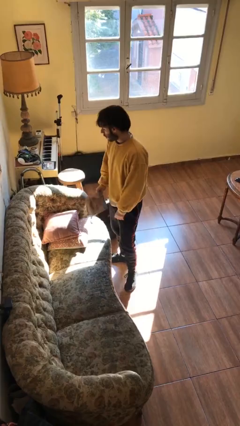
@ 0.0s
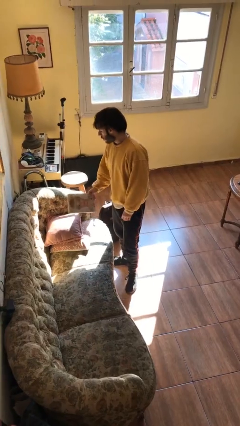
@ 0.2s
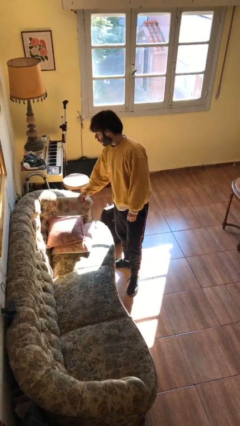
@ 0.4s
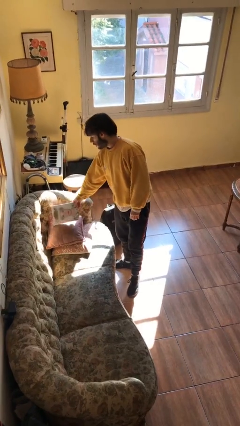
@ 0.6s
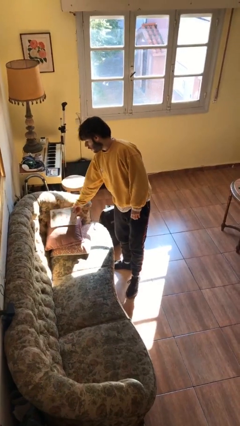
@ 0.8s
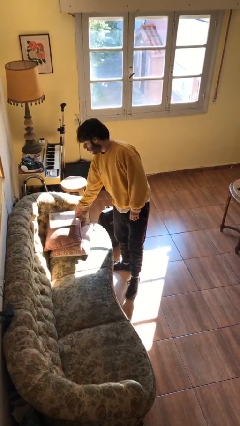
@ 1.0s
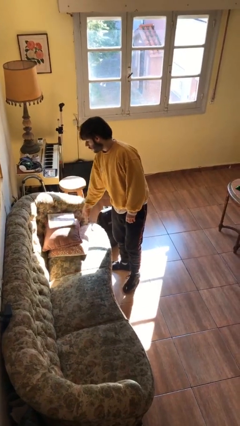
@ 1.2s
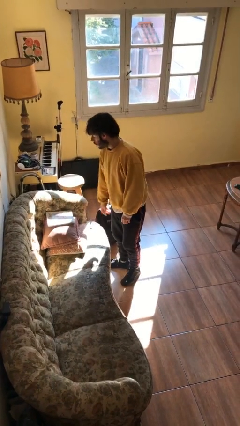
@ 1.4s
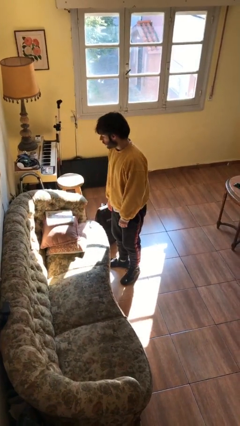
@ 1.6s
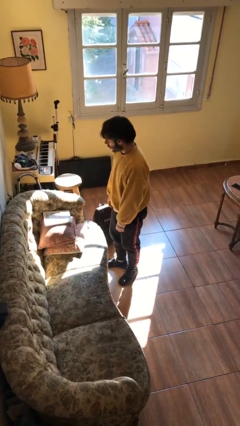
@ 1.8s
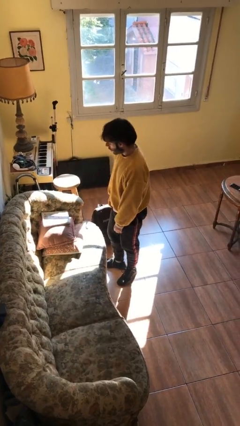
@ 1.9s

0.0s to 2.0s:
person puts down object on couch

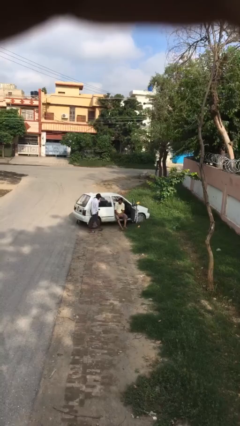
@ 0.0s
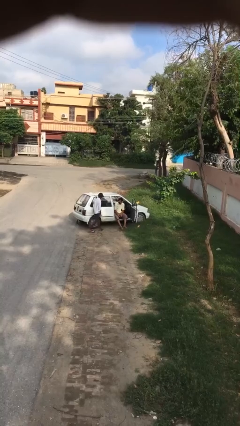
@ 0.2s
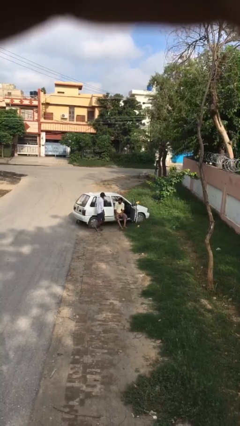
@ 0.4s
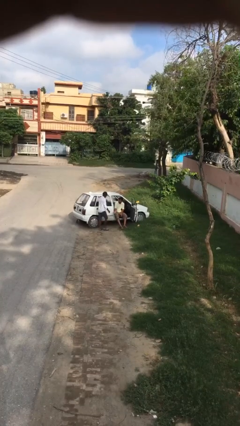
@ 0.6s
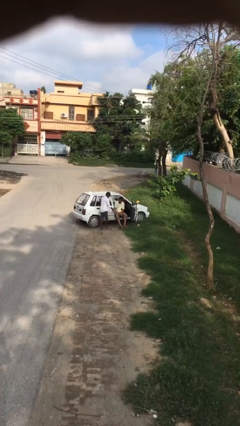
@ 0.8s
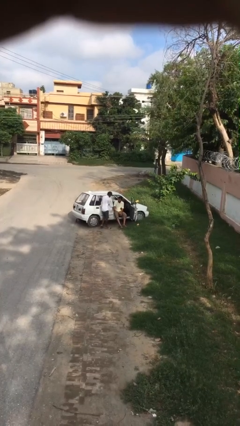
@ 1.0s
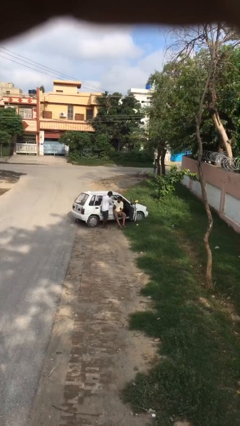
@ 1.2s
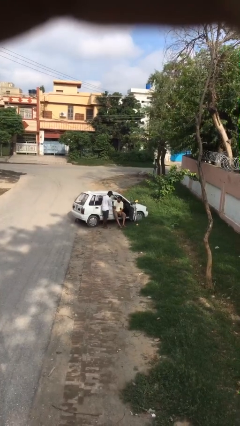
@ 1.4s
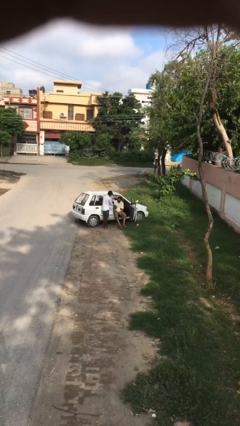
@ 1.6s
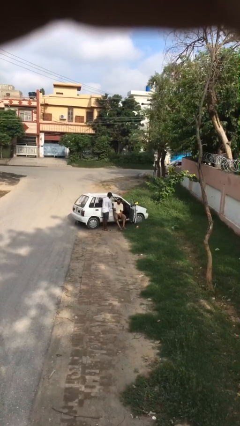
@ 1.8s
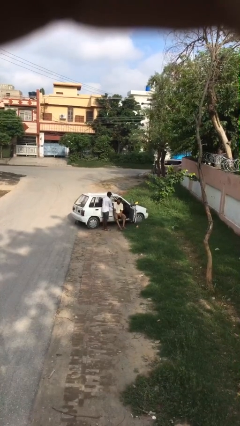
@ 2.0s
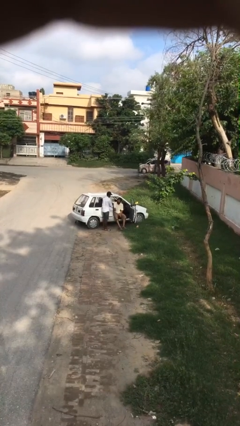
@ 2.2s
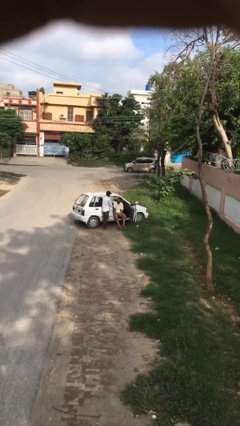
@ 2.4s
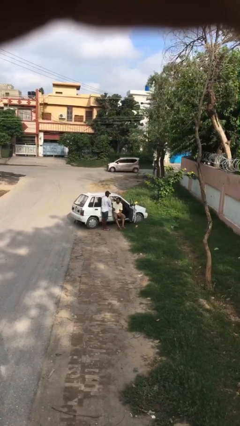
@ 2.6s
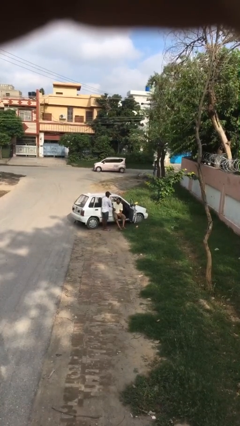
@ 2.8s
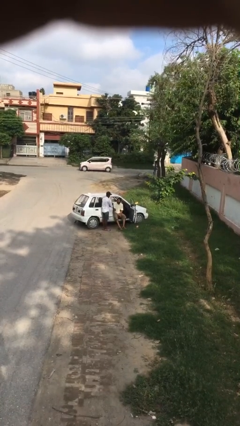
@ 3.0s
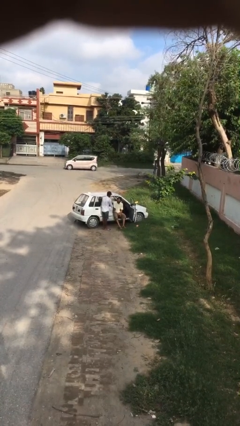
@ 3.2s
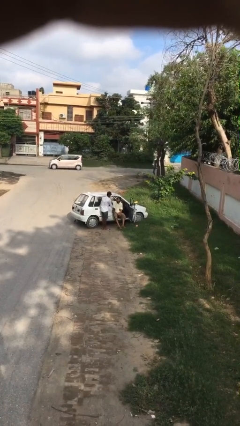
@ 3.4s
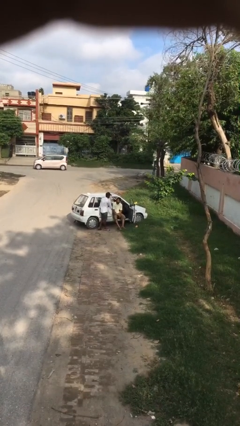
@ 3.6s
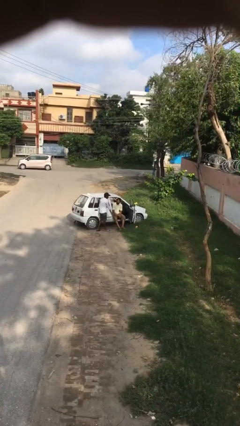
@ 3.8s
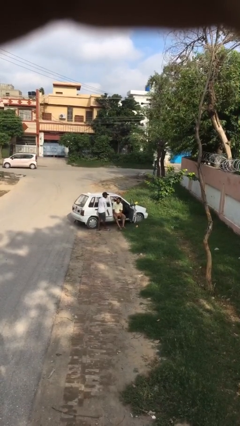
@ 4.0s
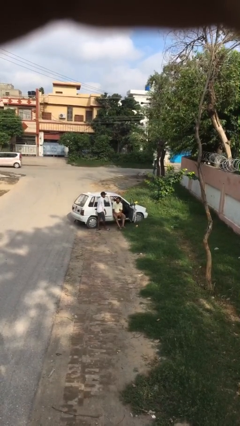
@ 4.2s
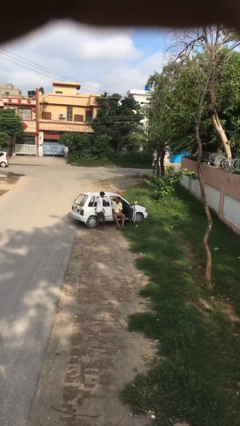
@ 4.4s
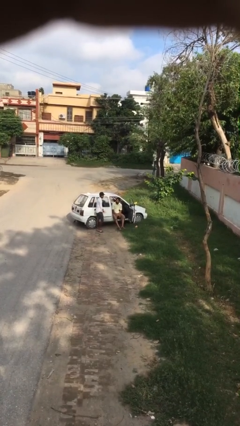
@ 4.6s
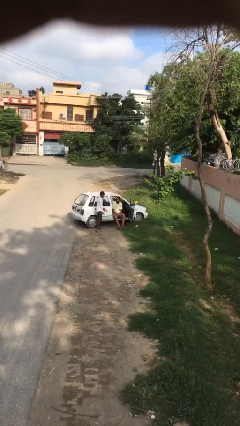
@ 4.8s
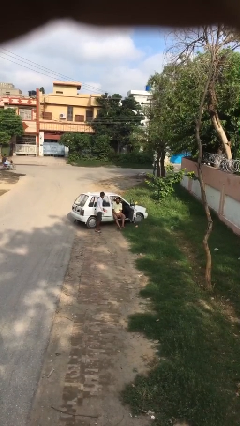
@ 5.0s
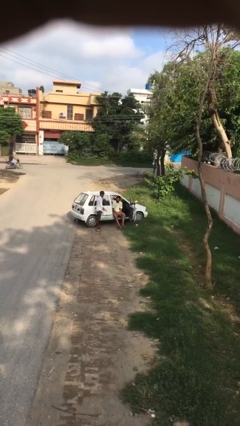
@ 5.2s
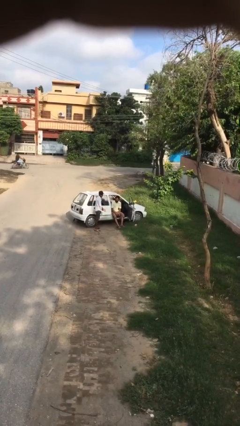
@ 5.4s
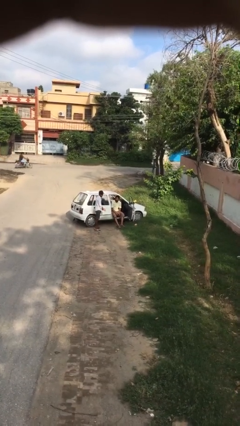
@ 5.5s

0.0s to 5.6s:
person shakes hand

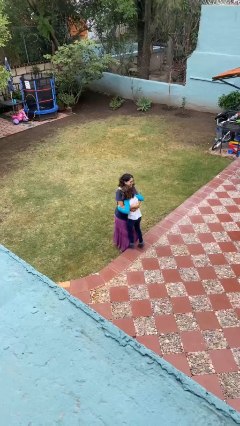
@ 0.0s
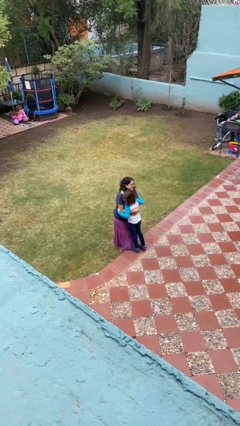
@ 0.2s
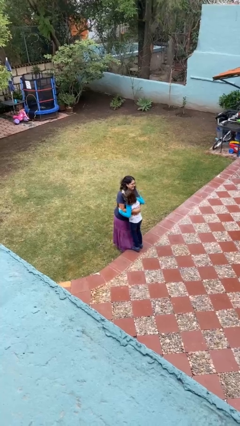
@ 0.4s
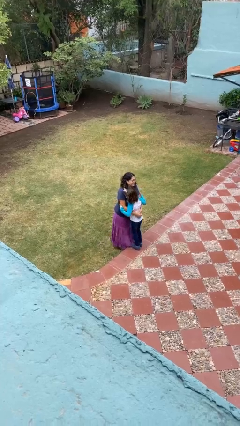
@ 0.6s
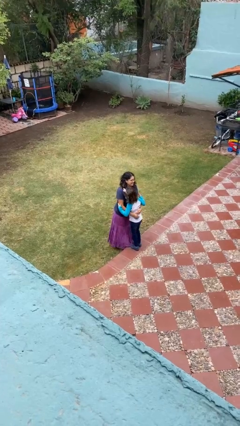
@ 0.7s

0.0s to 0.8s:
person puts down person

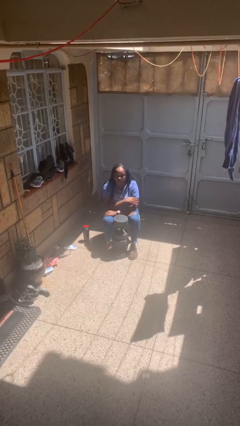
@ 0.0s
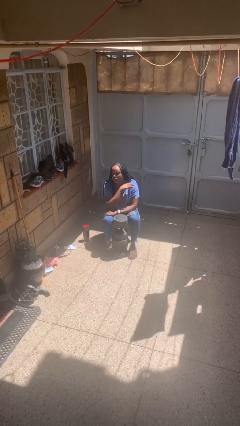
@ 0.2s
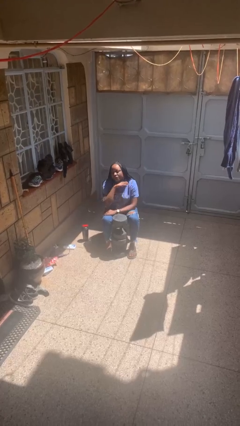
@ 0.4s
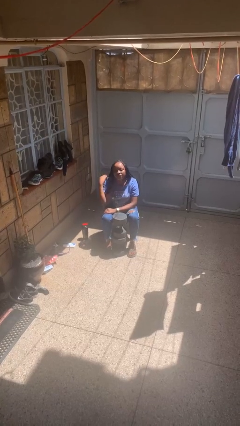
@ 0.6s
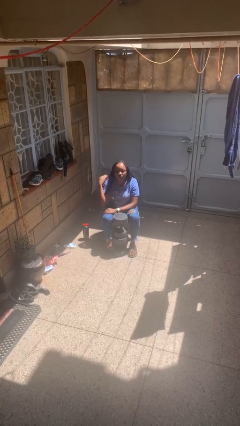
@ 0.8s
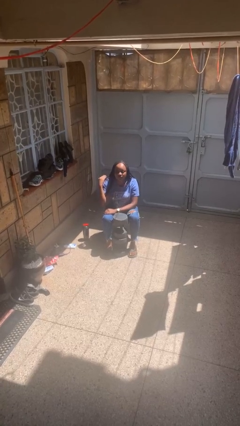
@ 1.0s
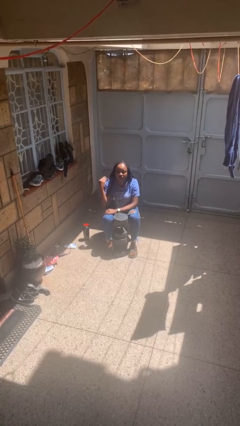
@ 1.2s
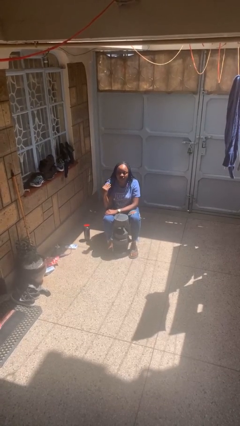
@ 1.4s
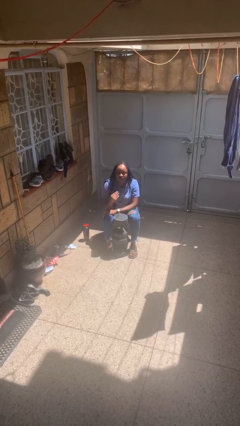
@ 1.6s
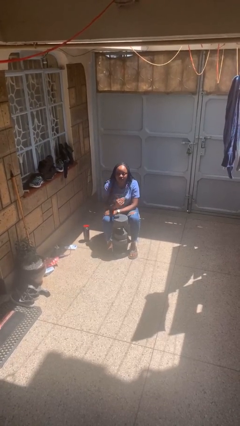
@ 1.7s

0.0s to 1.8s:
person gestures cut

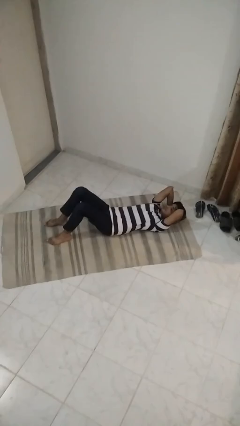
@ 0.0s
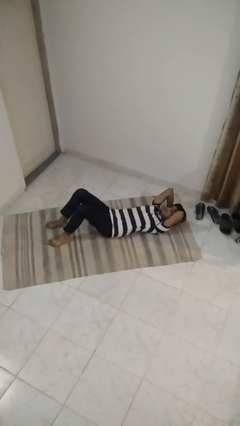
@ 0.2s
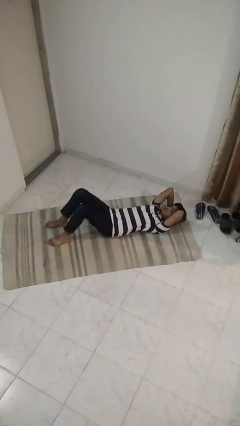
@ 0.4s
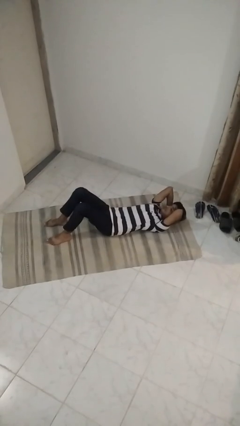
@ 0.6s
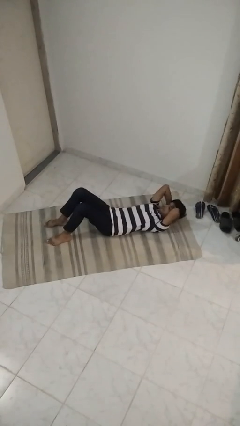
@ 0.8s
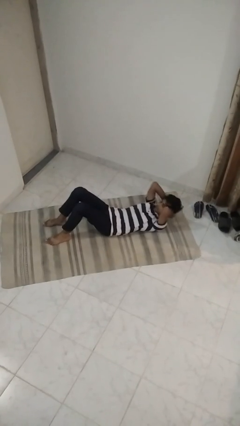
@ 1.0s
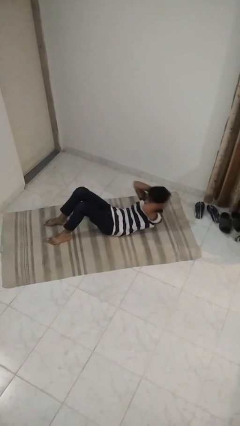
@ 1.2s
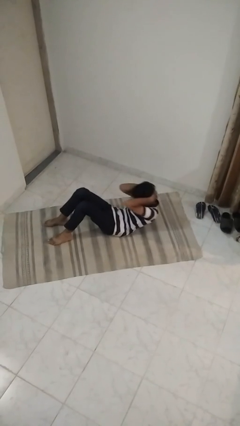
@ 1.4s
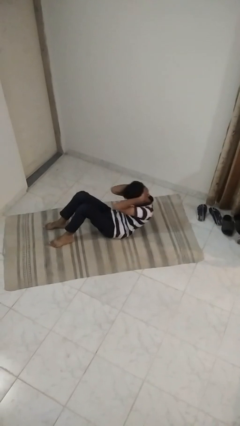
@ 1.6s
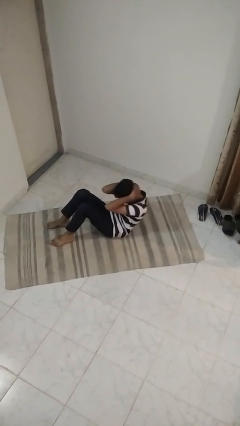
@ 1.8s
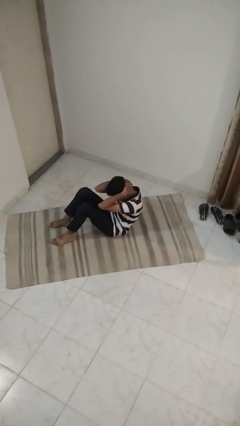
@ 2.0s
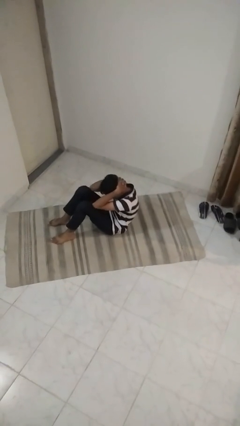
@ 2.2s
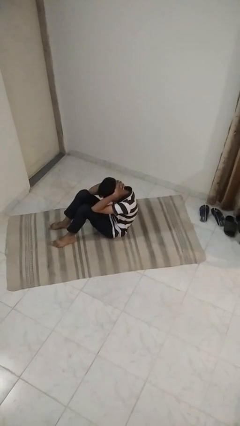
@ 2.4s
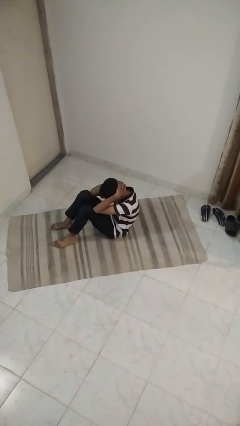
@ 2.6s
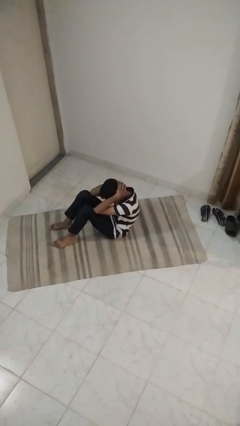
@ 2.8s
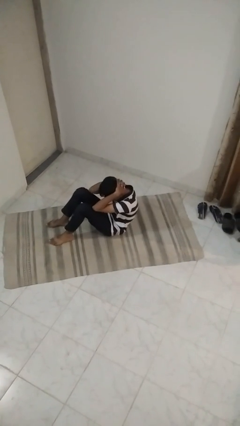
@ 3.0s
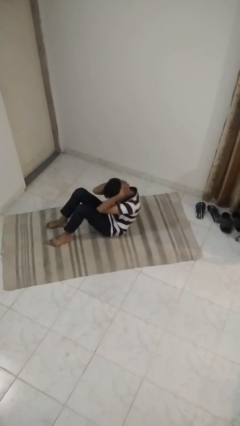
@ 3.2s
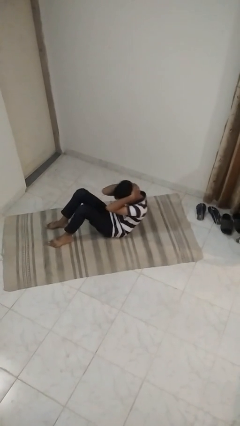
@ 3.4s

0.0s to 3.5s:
person exercises with situp

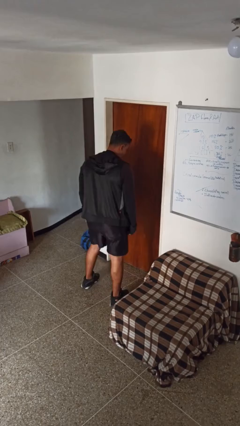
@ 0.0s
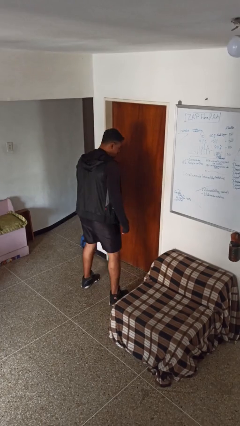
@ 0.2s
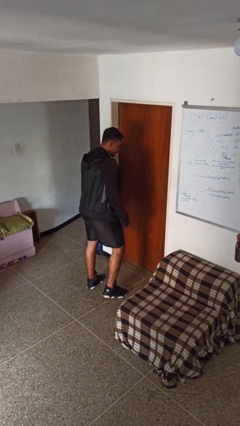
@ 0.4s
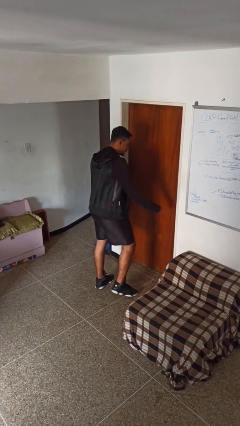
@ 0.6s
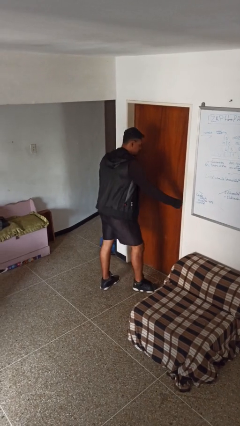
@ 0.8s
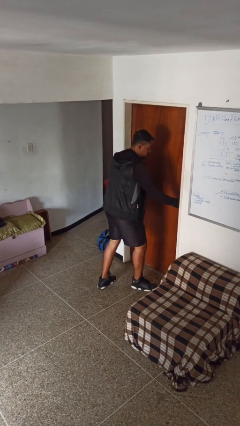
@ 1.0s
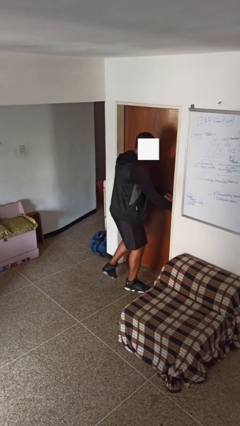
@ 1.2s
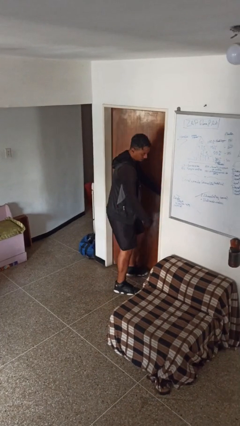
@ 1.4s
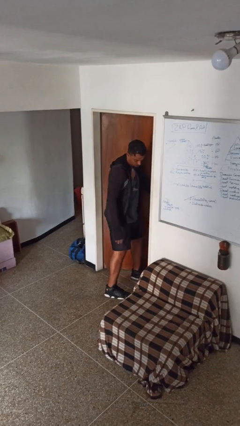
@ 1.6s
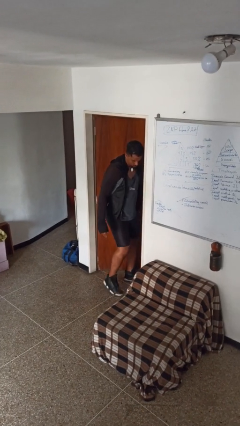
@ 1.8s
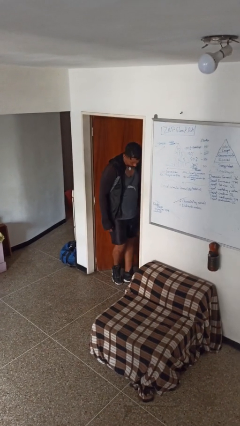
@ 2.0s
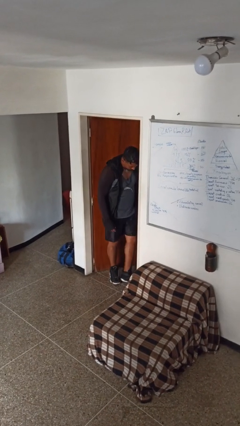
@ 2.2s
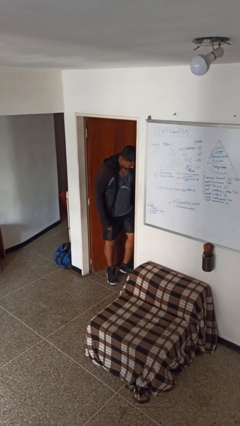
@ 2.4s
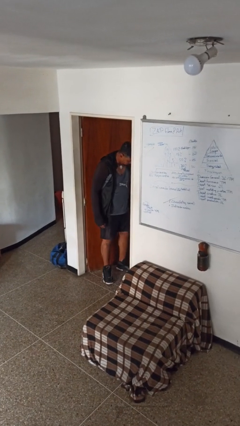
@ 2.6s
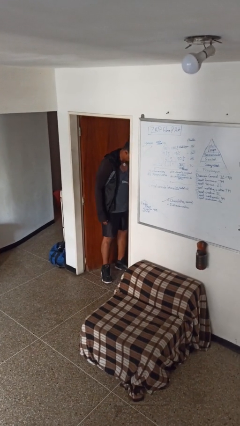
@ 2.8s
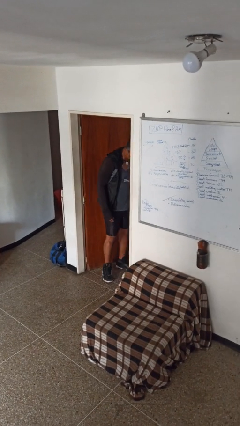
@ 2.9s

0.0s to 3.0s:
person opens facility door

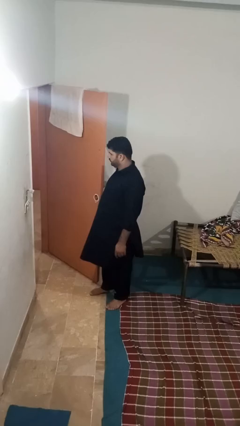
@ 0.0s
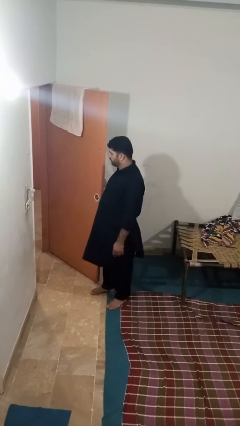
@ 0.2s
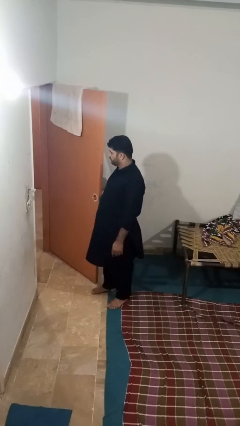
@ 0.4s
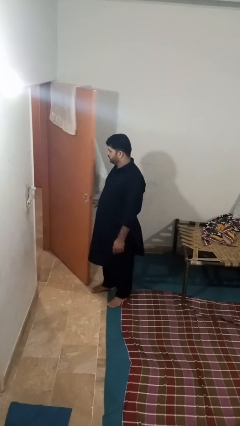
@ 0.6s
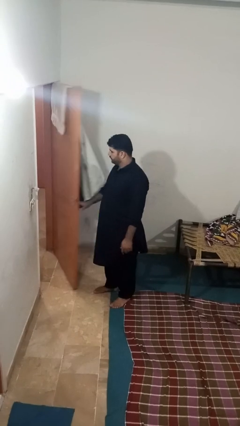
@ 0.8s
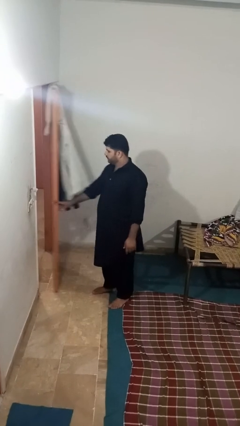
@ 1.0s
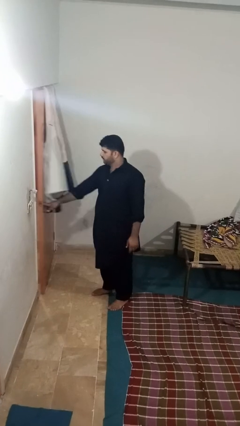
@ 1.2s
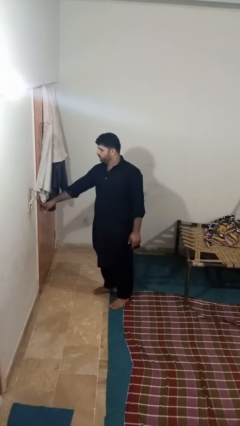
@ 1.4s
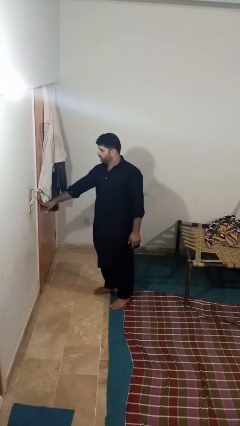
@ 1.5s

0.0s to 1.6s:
person closes gate
